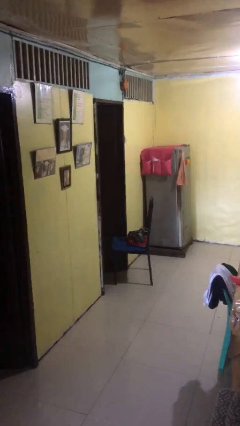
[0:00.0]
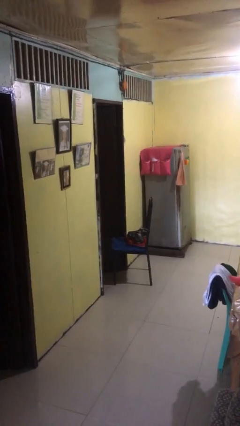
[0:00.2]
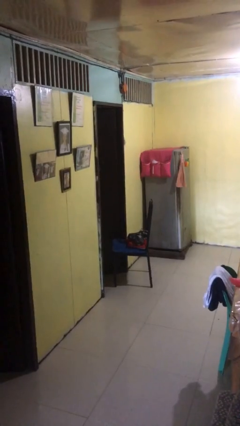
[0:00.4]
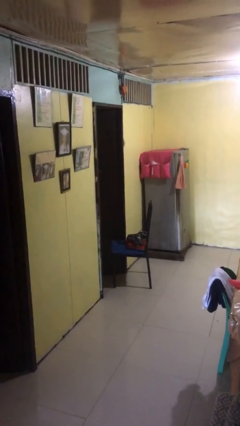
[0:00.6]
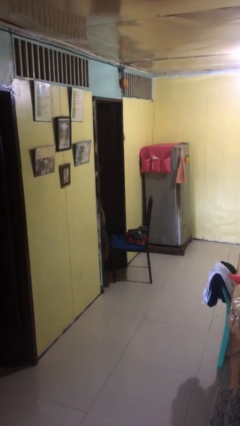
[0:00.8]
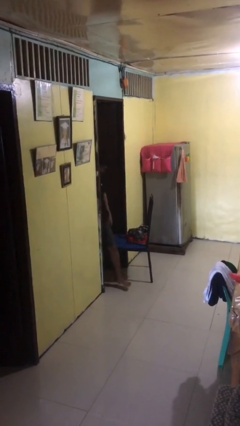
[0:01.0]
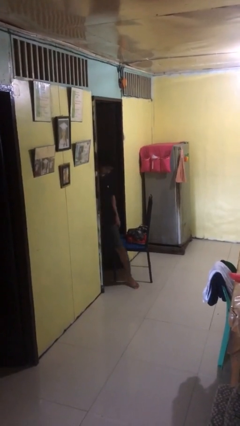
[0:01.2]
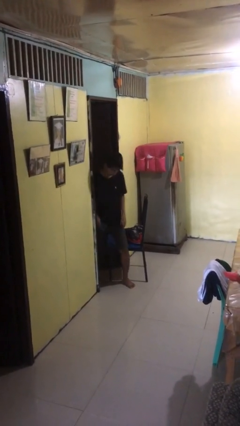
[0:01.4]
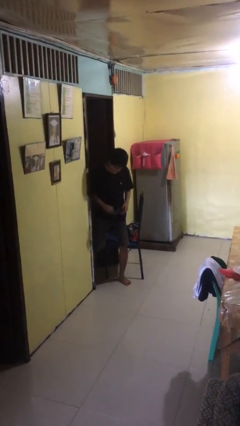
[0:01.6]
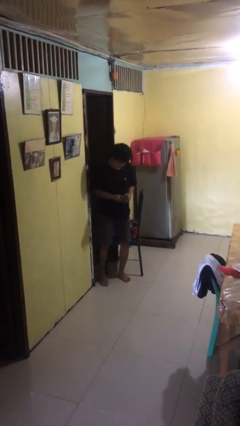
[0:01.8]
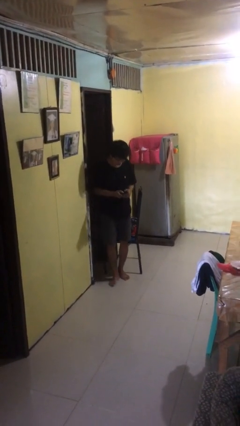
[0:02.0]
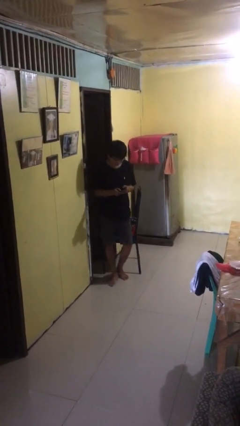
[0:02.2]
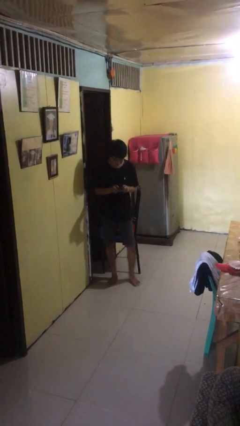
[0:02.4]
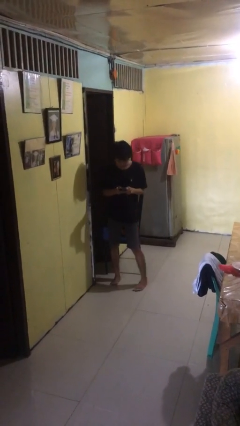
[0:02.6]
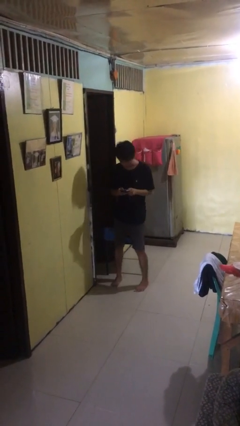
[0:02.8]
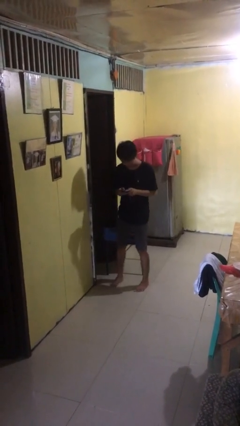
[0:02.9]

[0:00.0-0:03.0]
person enters scene through structure

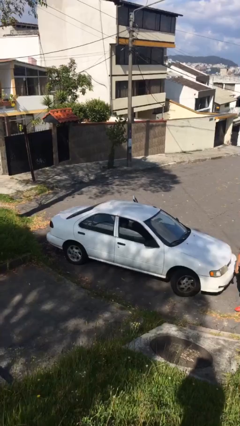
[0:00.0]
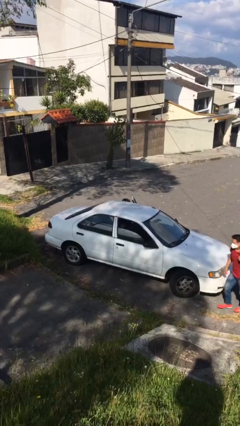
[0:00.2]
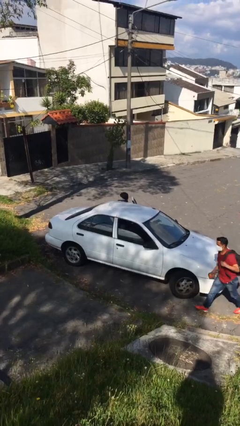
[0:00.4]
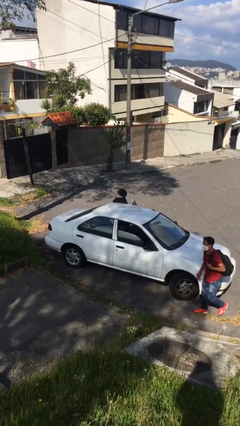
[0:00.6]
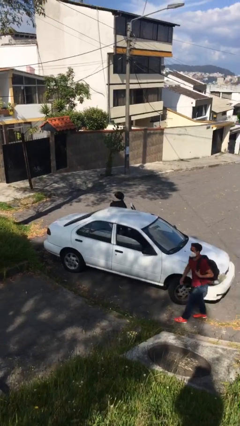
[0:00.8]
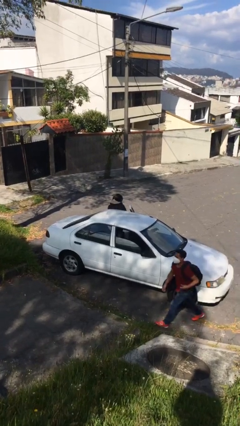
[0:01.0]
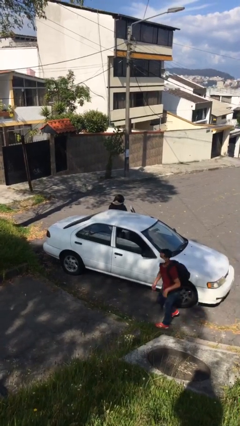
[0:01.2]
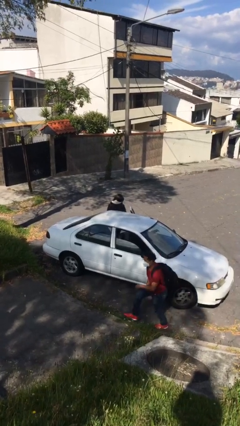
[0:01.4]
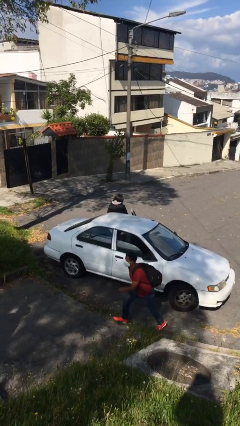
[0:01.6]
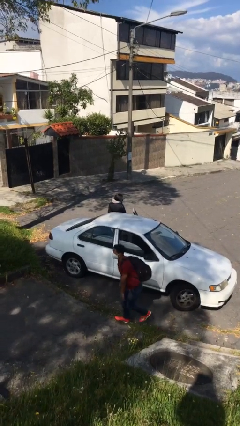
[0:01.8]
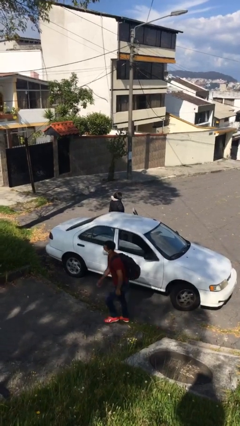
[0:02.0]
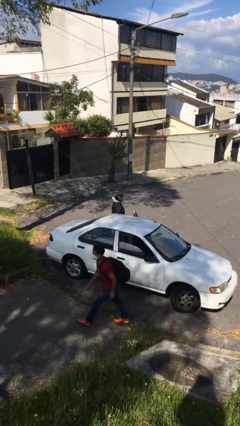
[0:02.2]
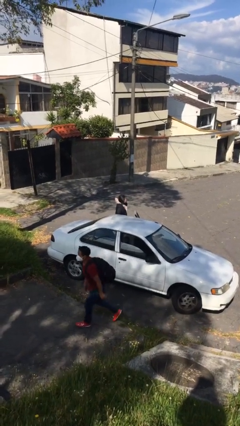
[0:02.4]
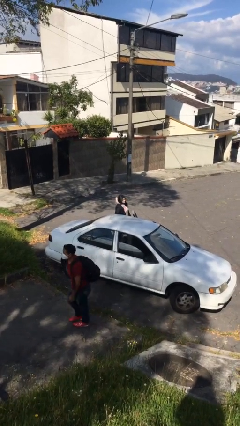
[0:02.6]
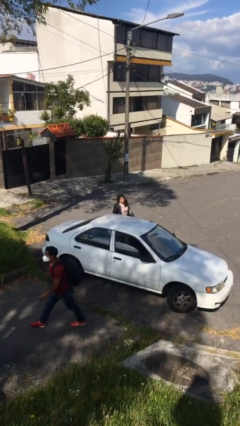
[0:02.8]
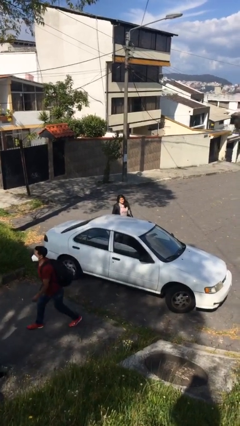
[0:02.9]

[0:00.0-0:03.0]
person exits car

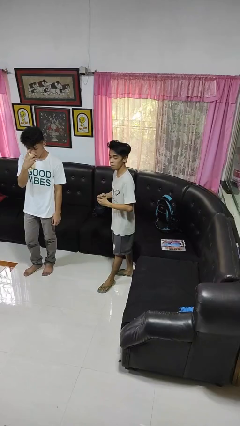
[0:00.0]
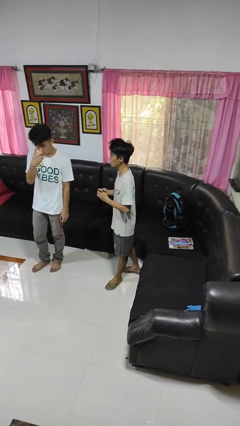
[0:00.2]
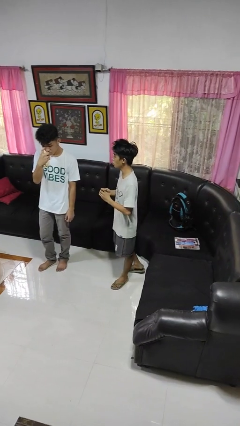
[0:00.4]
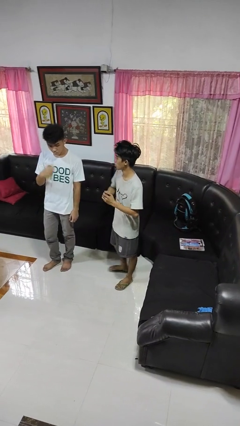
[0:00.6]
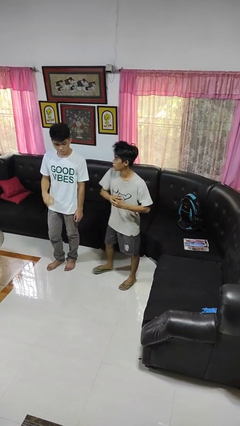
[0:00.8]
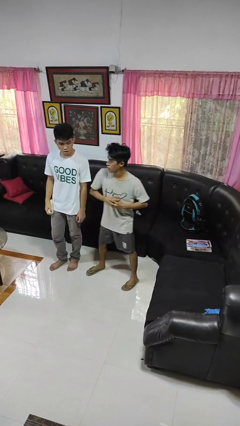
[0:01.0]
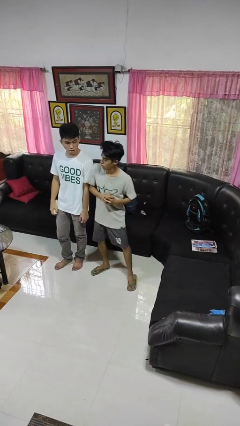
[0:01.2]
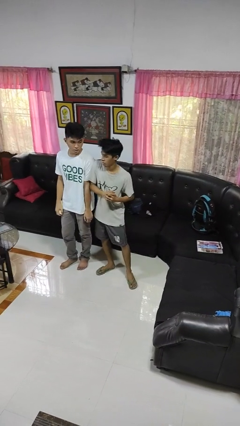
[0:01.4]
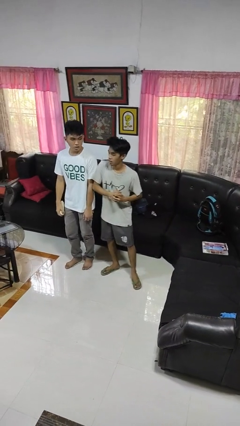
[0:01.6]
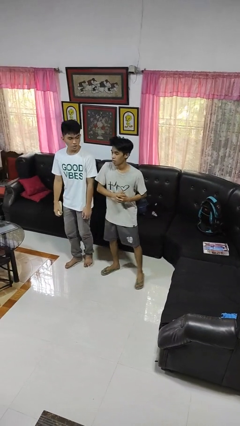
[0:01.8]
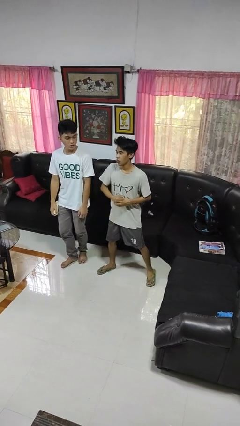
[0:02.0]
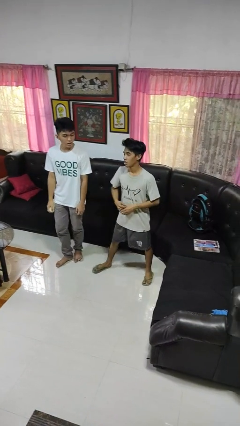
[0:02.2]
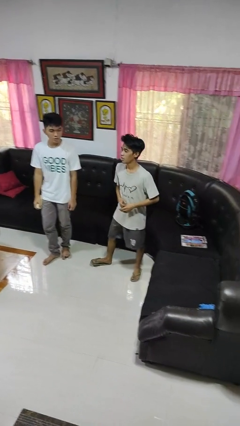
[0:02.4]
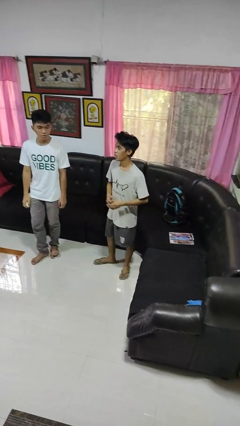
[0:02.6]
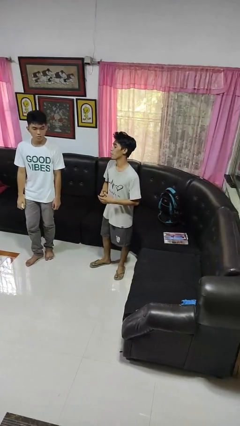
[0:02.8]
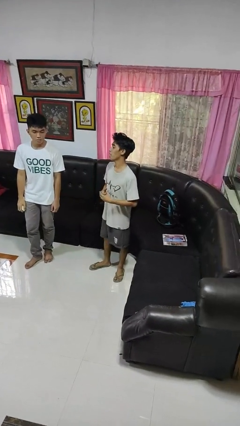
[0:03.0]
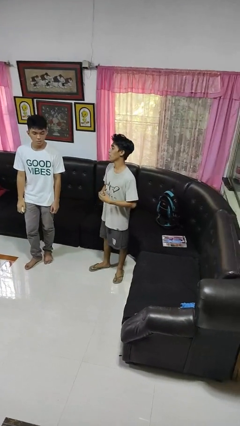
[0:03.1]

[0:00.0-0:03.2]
person nudges person with elbow

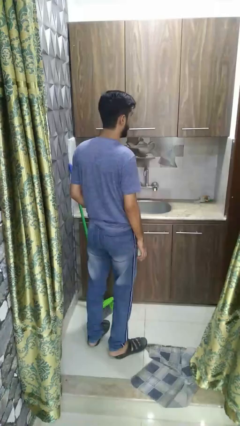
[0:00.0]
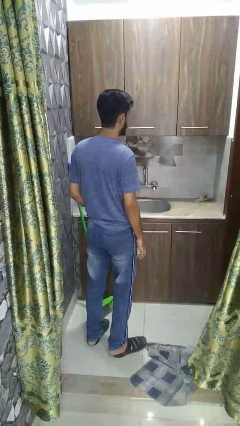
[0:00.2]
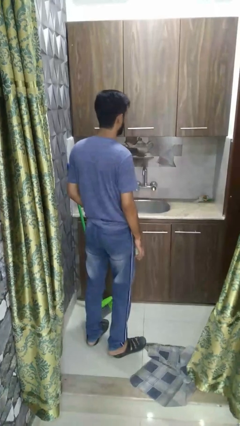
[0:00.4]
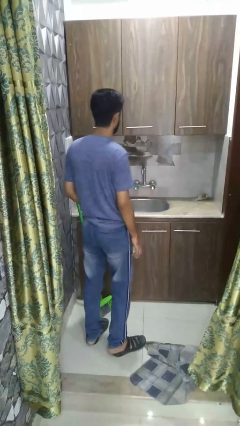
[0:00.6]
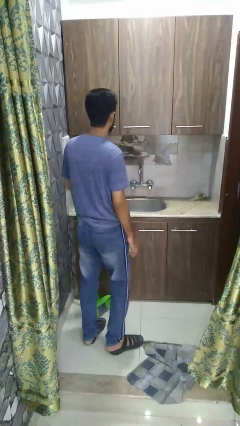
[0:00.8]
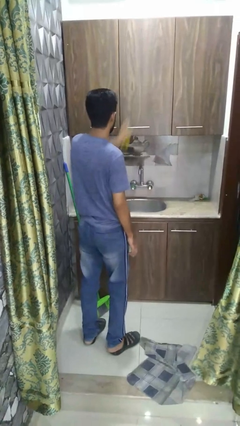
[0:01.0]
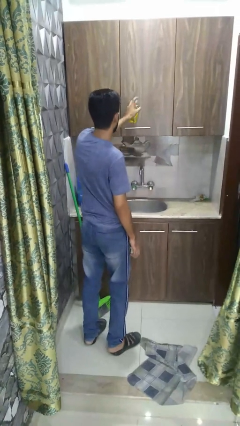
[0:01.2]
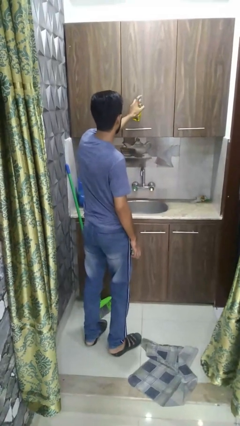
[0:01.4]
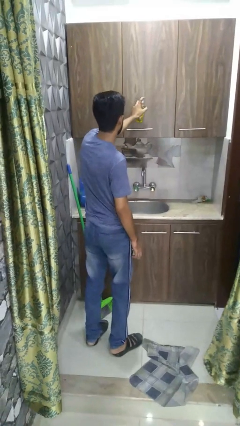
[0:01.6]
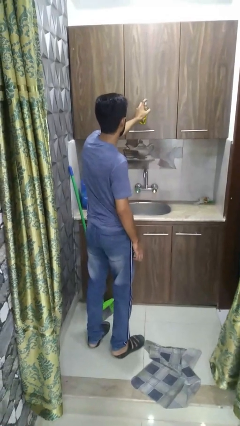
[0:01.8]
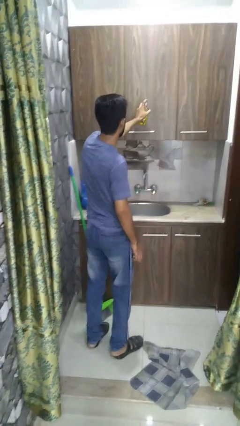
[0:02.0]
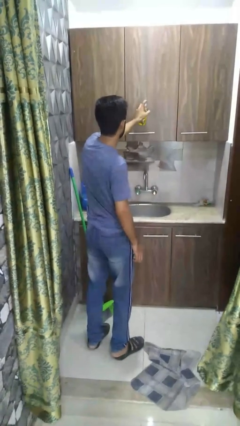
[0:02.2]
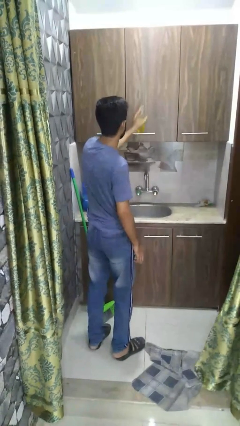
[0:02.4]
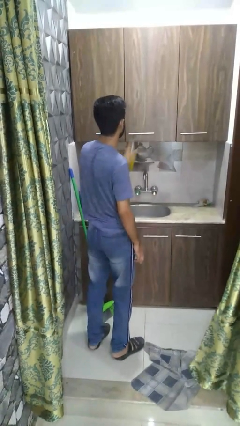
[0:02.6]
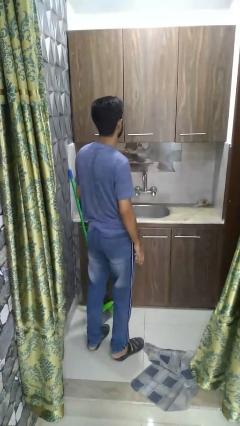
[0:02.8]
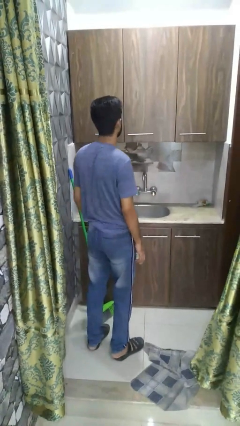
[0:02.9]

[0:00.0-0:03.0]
person sprays from bottle

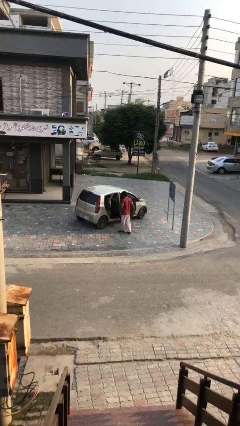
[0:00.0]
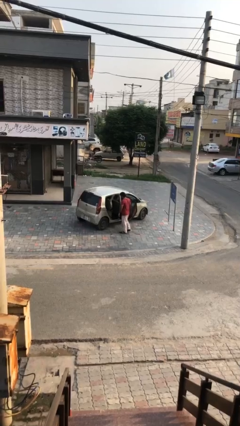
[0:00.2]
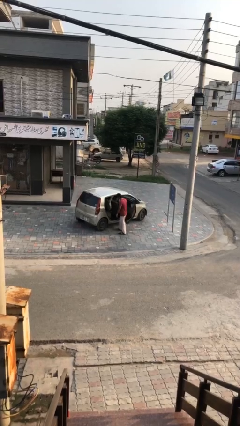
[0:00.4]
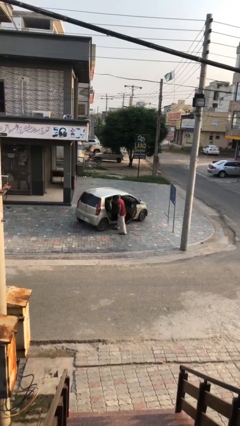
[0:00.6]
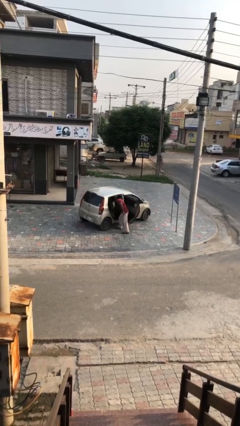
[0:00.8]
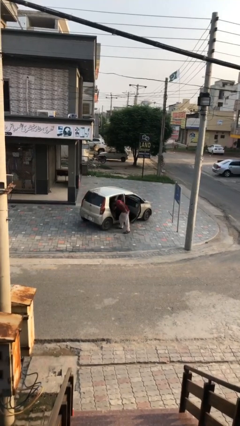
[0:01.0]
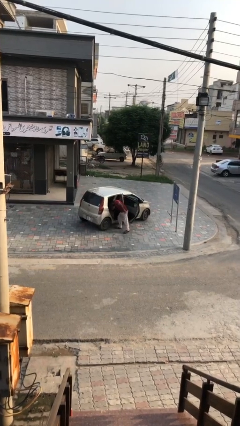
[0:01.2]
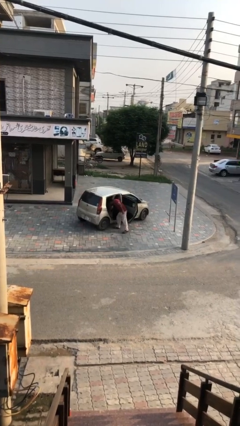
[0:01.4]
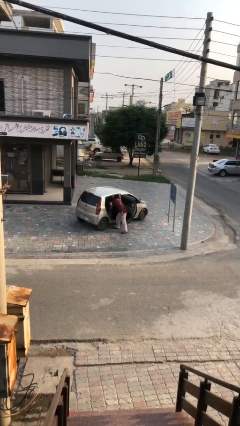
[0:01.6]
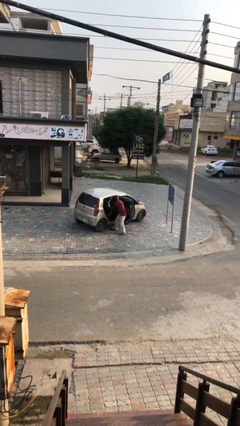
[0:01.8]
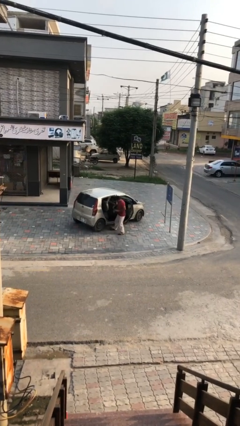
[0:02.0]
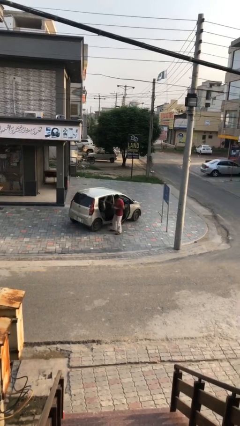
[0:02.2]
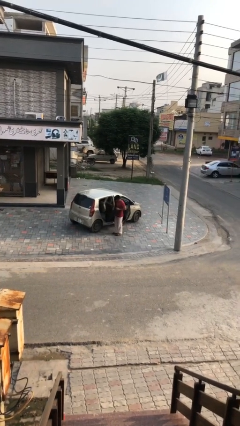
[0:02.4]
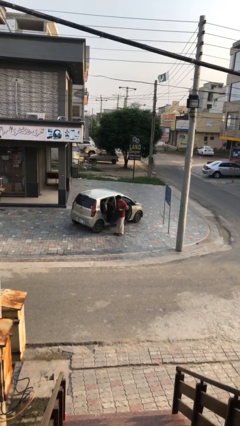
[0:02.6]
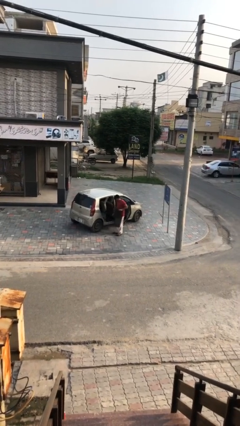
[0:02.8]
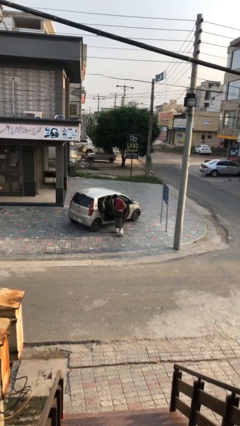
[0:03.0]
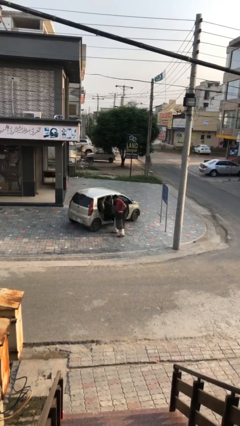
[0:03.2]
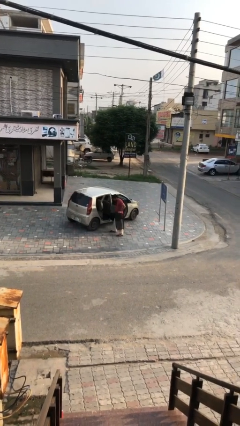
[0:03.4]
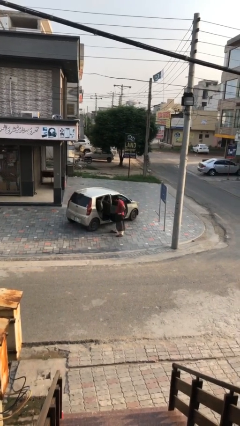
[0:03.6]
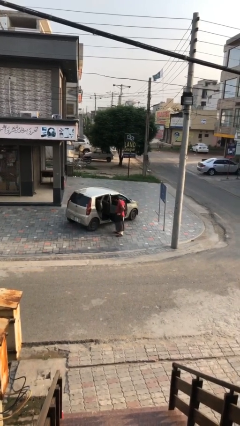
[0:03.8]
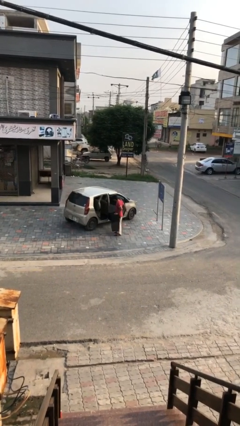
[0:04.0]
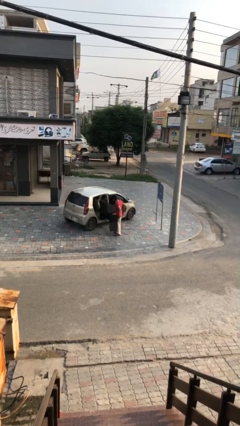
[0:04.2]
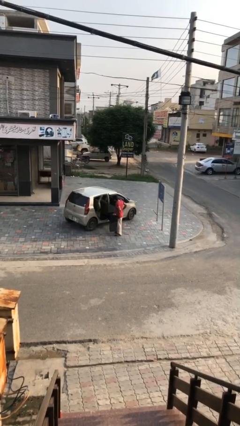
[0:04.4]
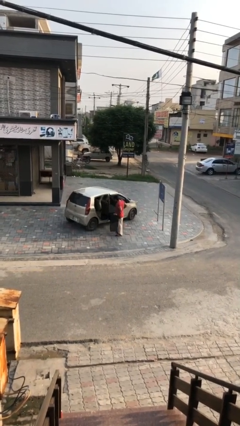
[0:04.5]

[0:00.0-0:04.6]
person unloads car

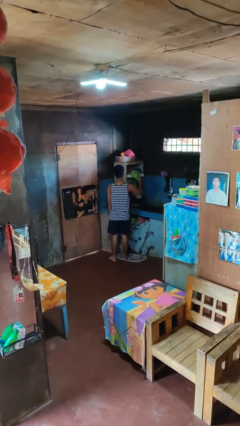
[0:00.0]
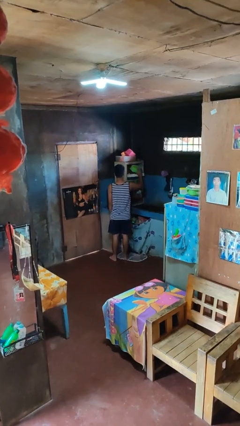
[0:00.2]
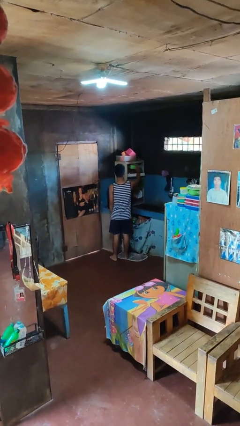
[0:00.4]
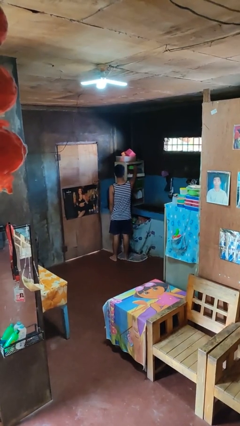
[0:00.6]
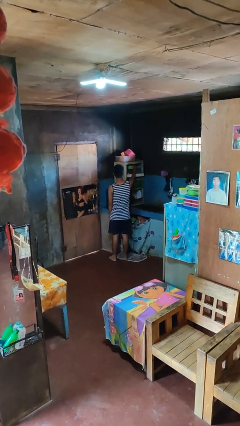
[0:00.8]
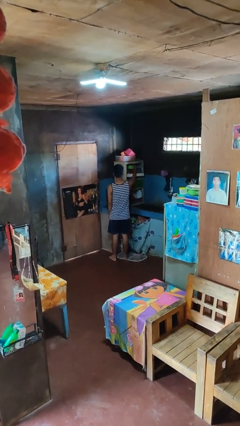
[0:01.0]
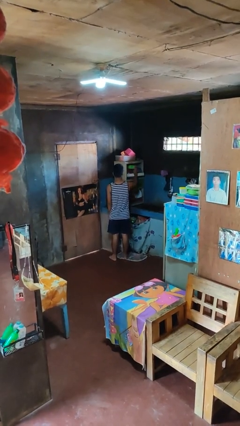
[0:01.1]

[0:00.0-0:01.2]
person puts object in cabinet
